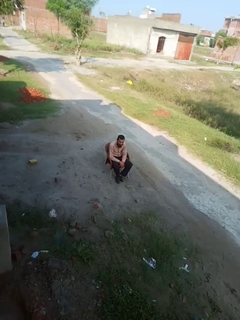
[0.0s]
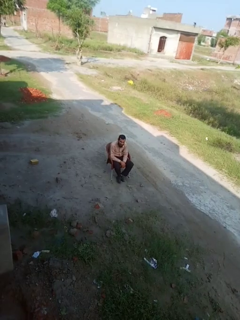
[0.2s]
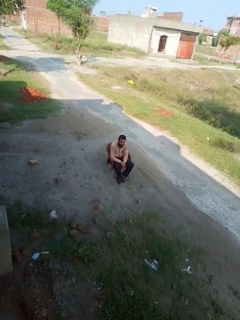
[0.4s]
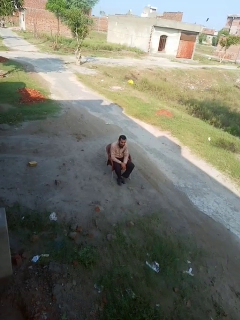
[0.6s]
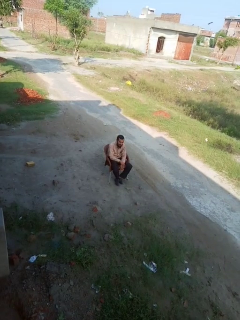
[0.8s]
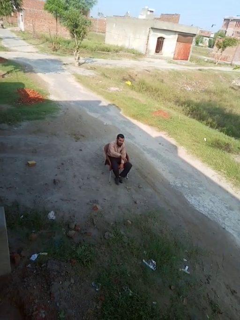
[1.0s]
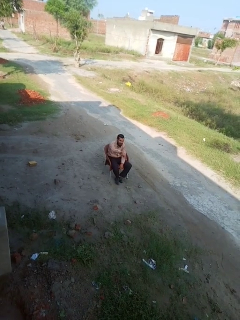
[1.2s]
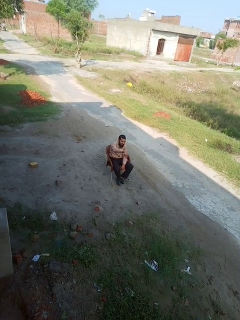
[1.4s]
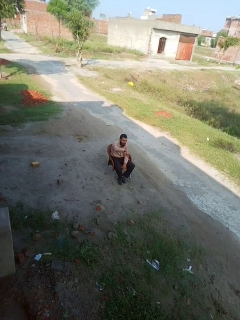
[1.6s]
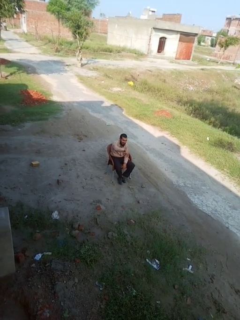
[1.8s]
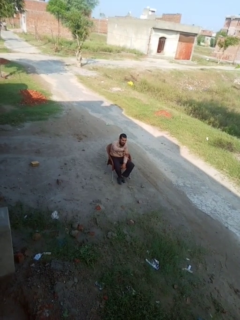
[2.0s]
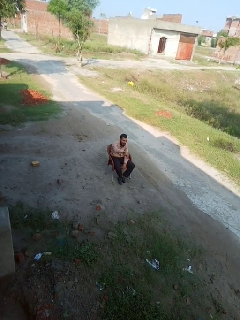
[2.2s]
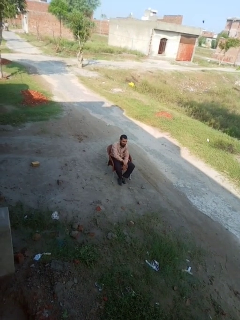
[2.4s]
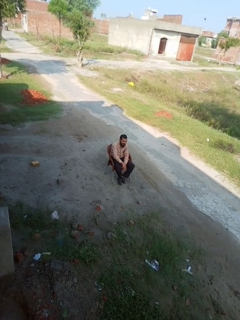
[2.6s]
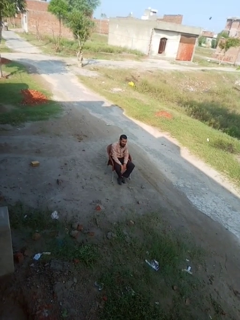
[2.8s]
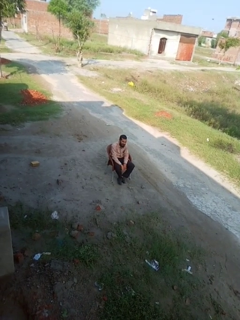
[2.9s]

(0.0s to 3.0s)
person gestures hang loose

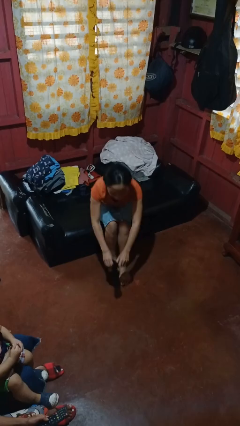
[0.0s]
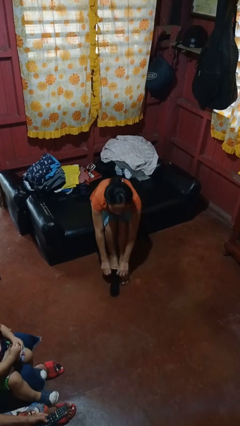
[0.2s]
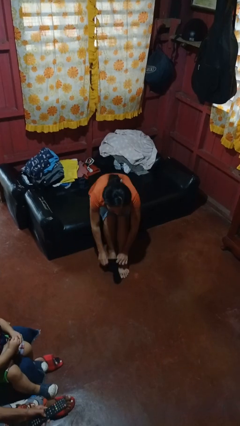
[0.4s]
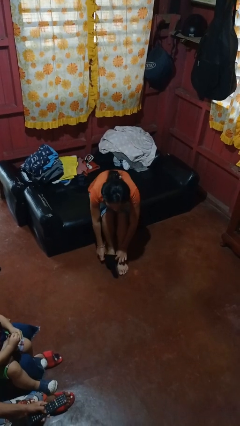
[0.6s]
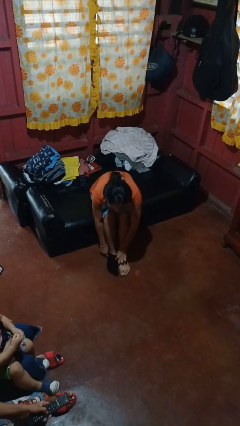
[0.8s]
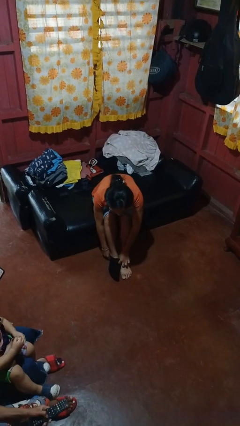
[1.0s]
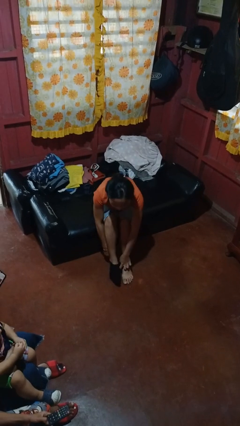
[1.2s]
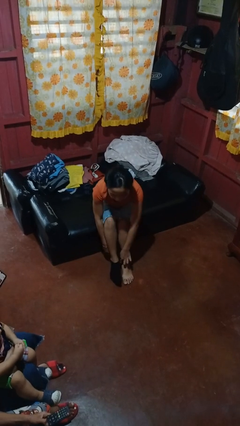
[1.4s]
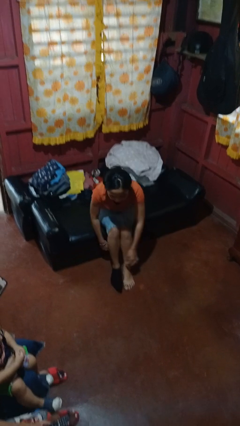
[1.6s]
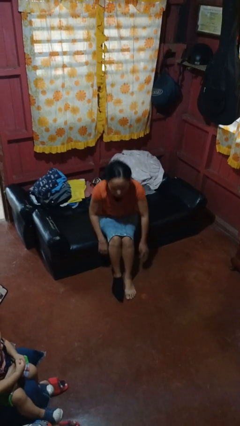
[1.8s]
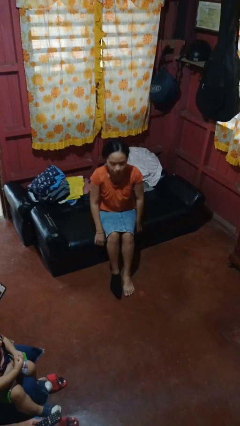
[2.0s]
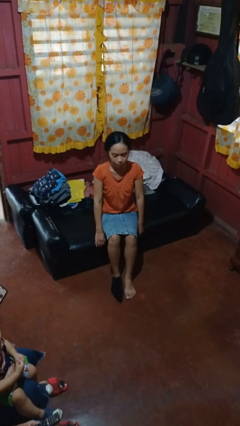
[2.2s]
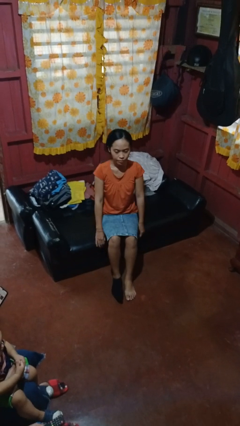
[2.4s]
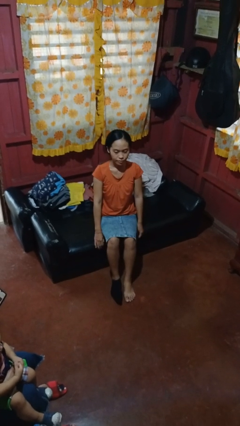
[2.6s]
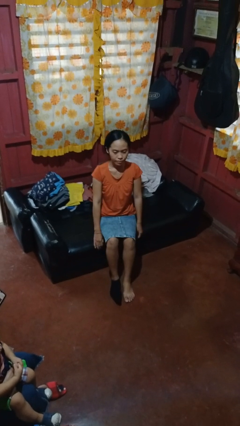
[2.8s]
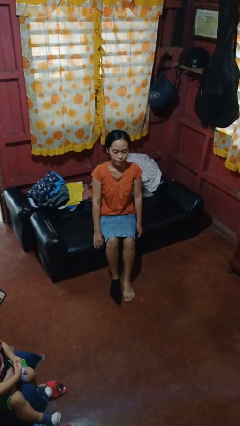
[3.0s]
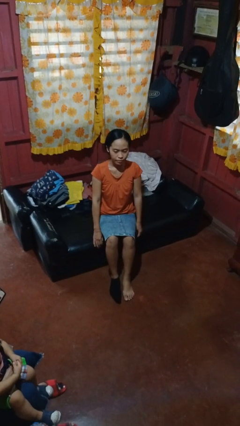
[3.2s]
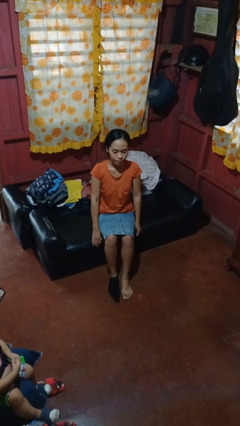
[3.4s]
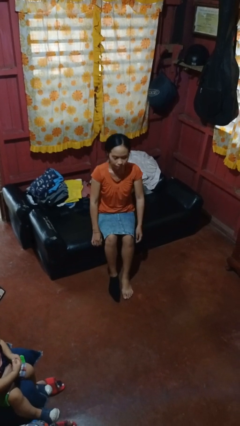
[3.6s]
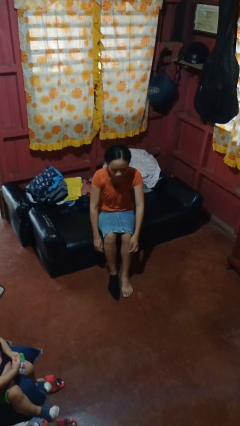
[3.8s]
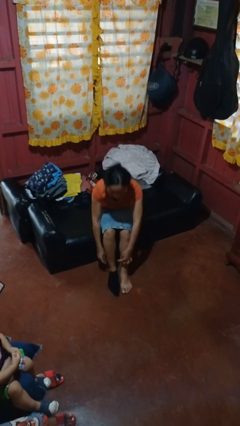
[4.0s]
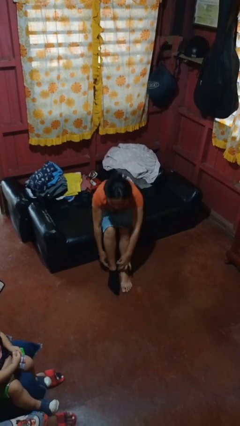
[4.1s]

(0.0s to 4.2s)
person puts on socks

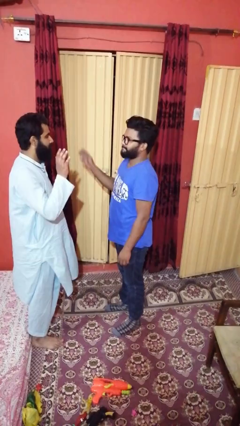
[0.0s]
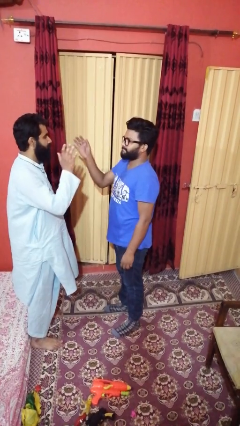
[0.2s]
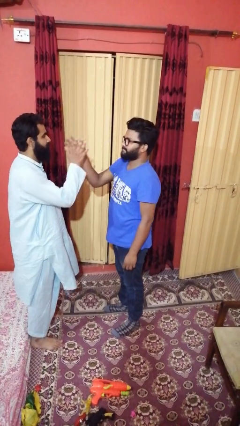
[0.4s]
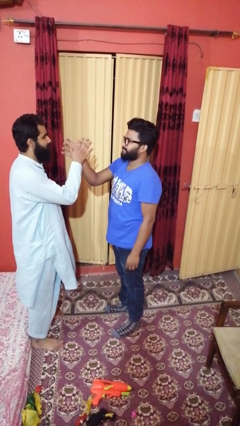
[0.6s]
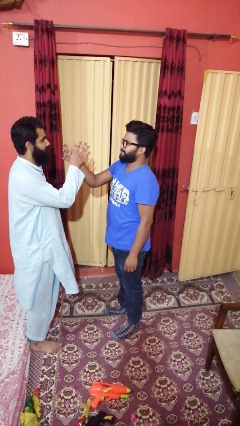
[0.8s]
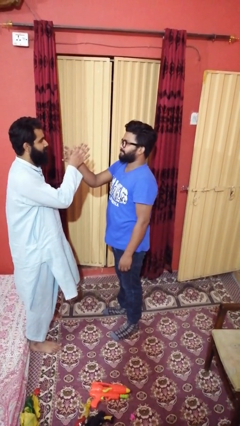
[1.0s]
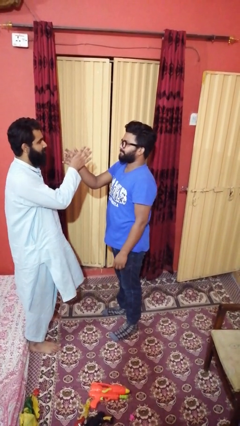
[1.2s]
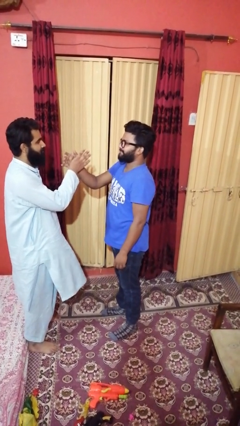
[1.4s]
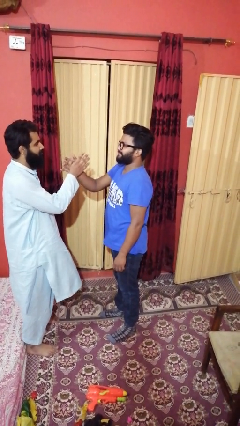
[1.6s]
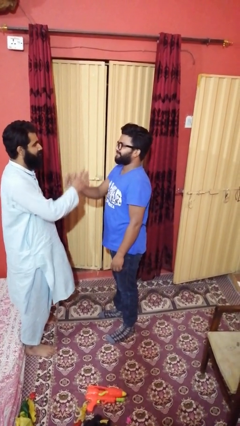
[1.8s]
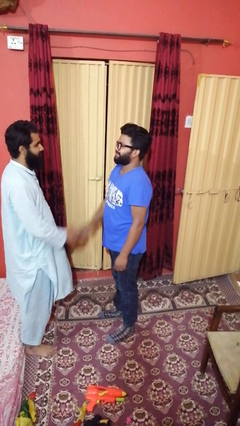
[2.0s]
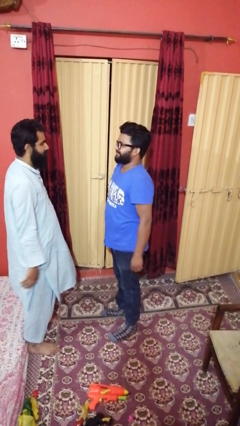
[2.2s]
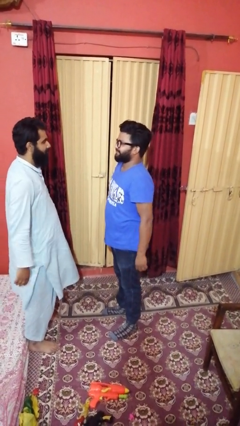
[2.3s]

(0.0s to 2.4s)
person highfives hand

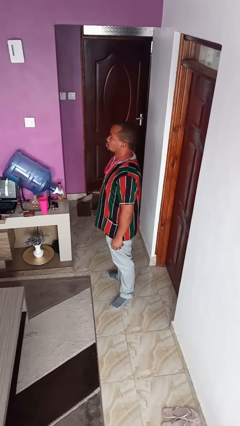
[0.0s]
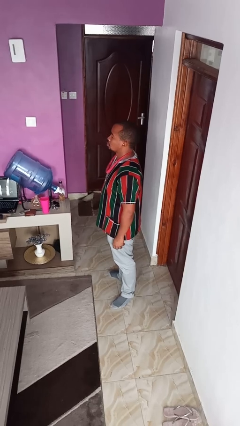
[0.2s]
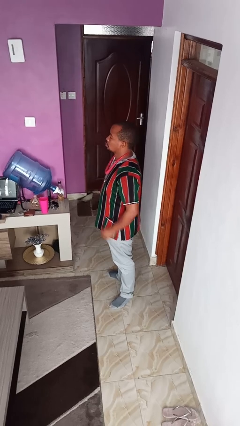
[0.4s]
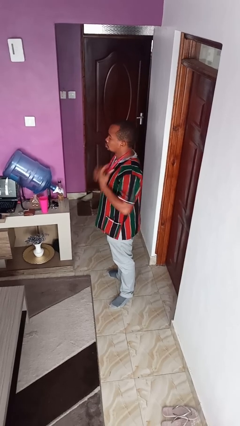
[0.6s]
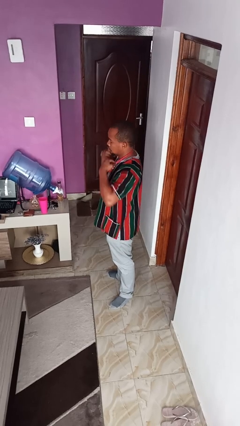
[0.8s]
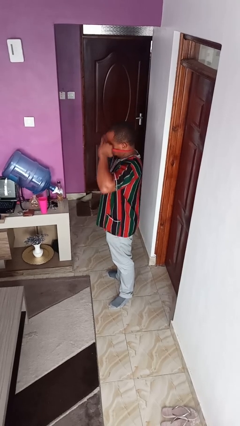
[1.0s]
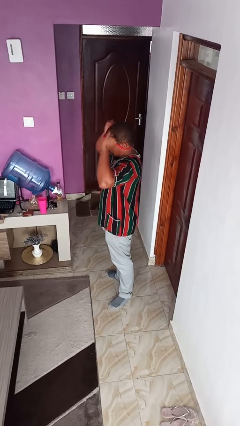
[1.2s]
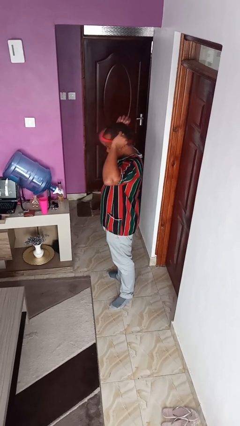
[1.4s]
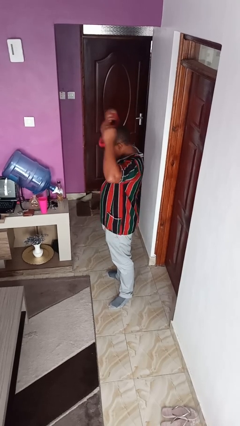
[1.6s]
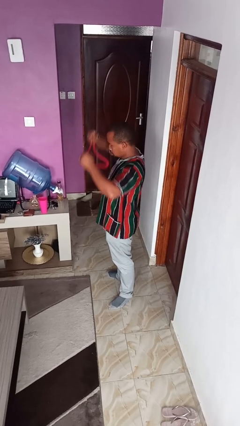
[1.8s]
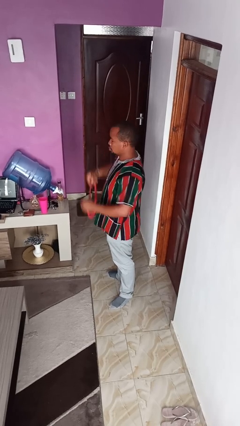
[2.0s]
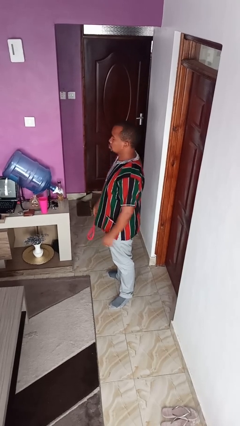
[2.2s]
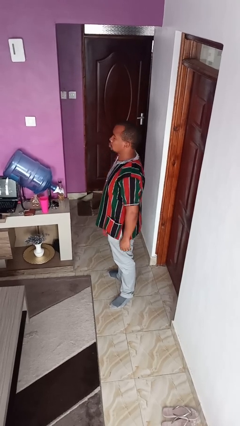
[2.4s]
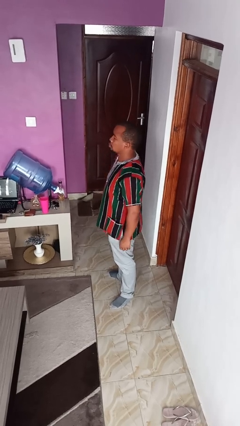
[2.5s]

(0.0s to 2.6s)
person takes off necklace

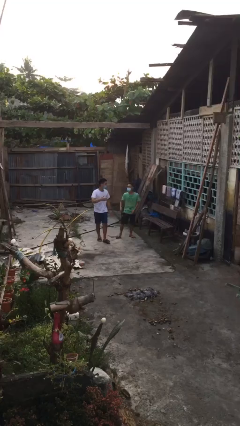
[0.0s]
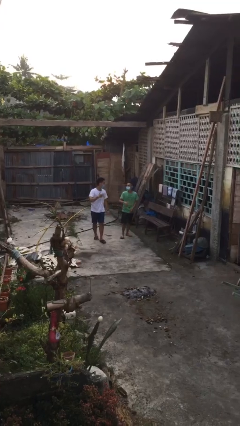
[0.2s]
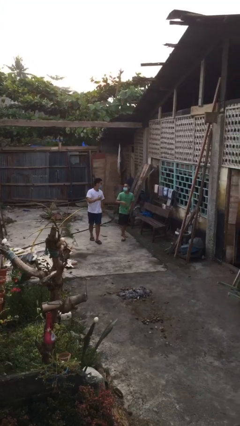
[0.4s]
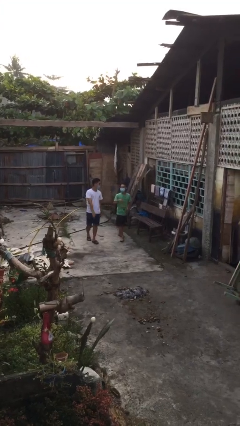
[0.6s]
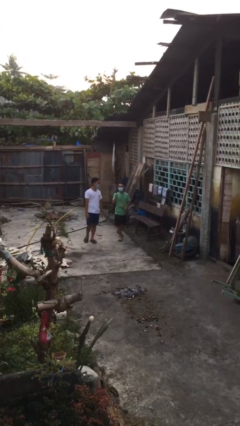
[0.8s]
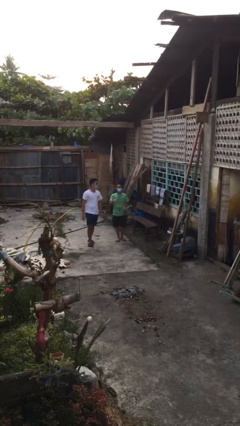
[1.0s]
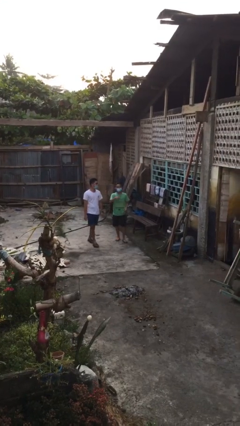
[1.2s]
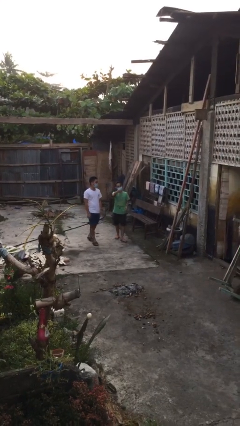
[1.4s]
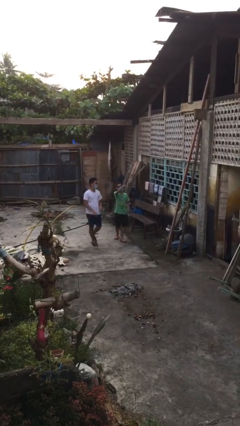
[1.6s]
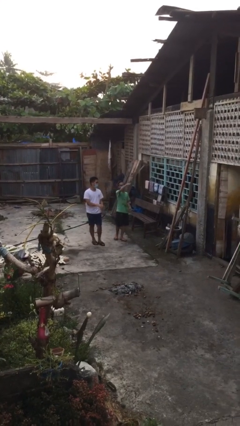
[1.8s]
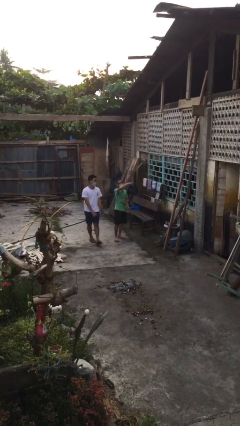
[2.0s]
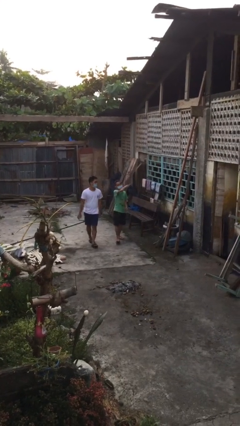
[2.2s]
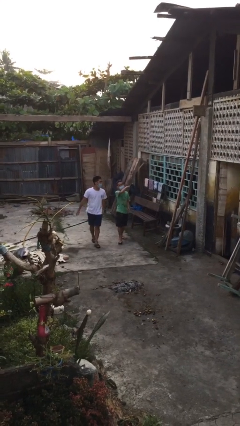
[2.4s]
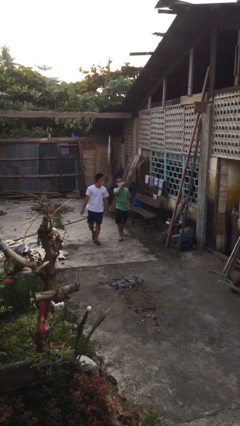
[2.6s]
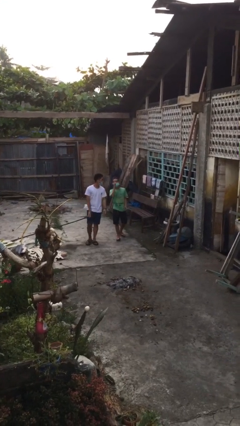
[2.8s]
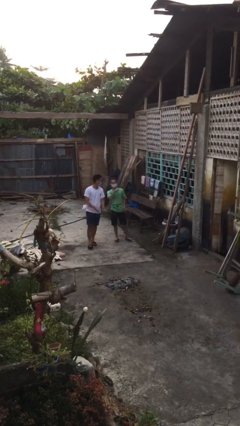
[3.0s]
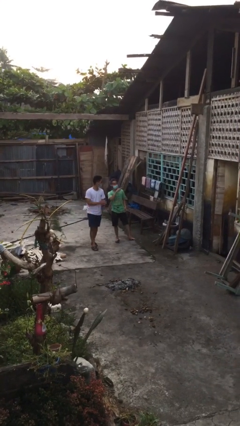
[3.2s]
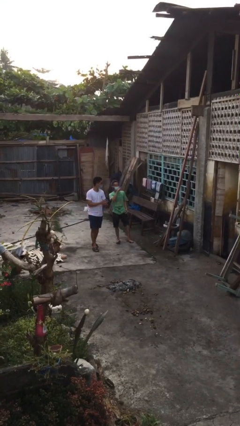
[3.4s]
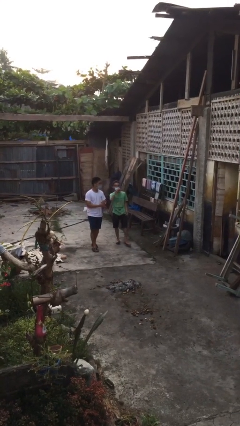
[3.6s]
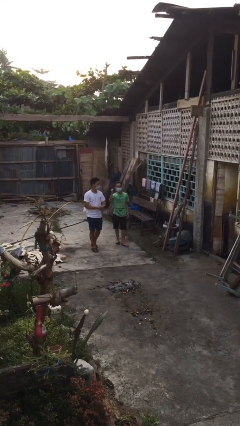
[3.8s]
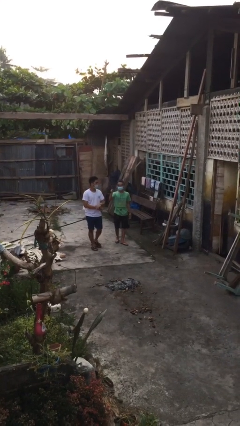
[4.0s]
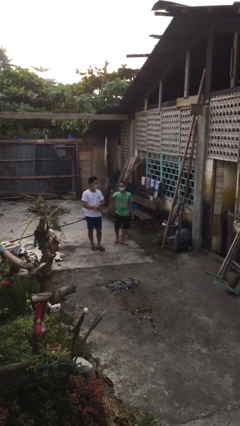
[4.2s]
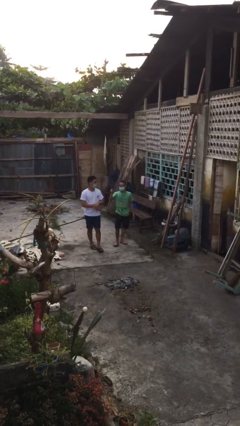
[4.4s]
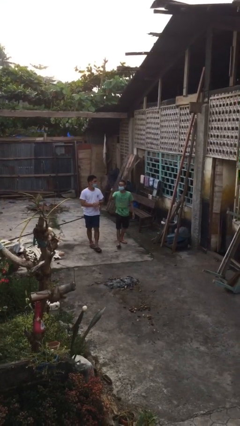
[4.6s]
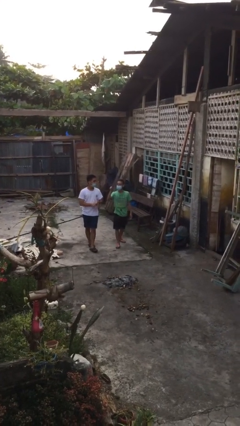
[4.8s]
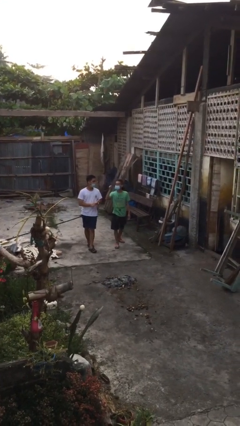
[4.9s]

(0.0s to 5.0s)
person talks to person

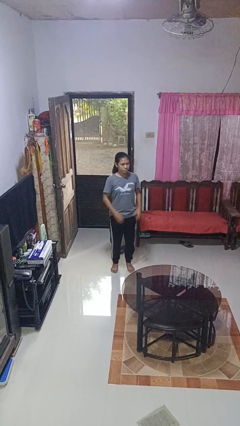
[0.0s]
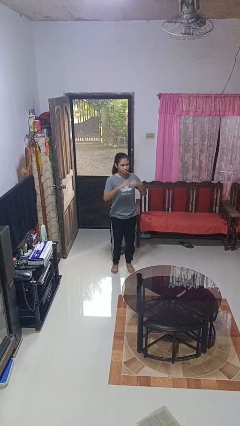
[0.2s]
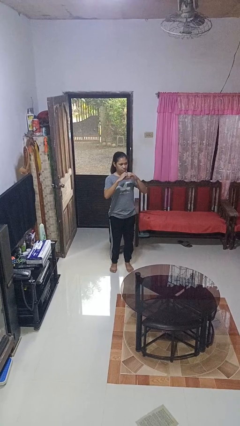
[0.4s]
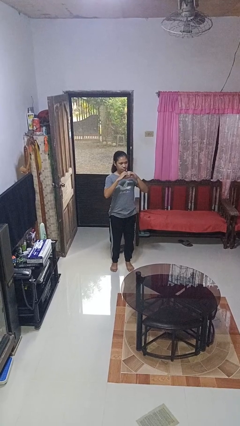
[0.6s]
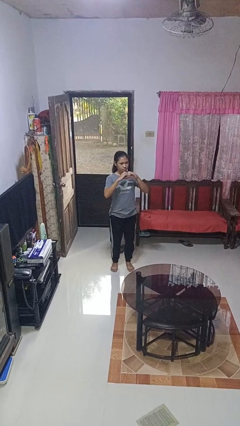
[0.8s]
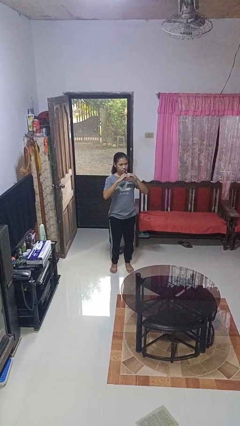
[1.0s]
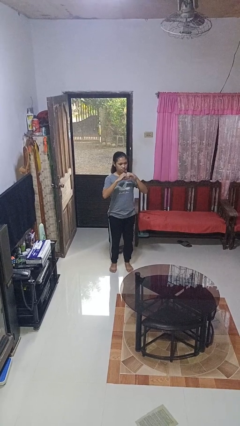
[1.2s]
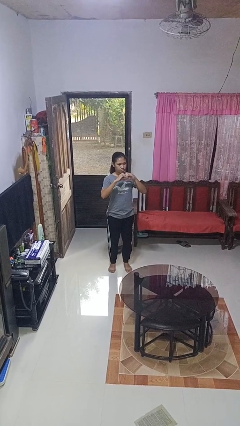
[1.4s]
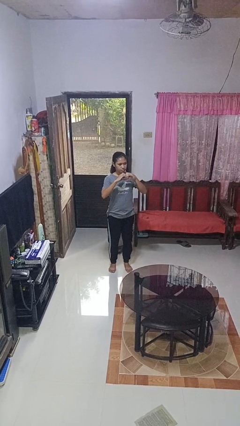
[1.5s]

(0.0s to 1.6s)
person gestures heart
